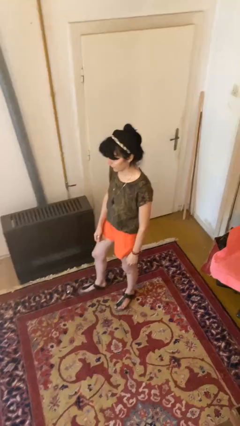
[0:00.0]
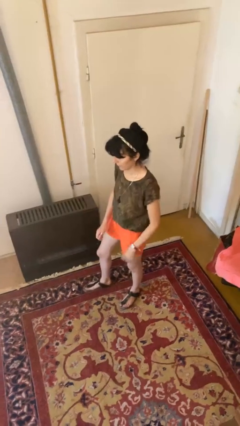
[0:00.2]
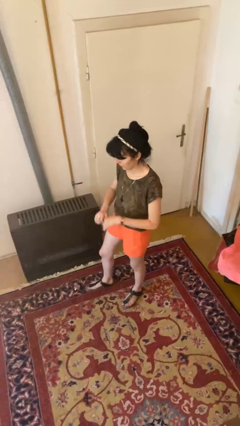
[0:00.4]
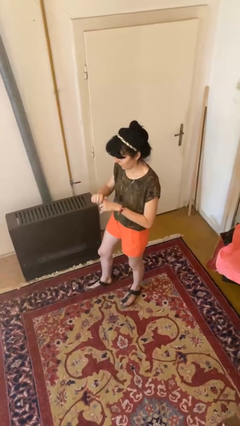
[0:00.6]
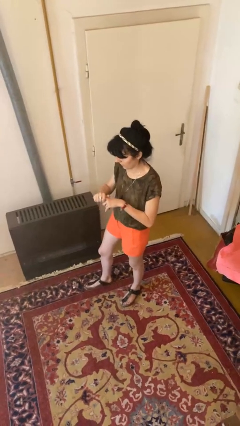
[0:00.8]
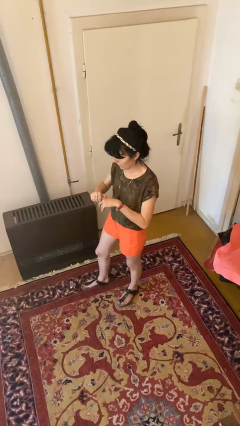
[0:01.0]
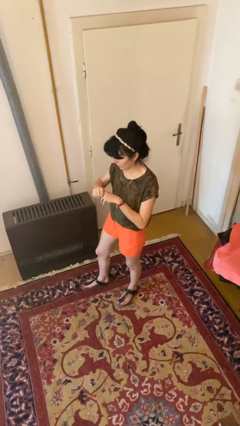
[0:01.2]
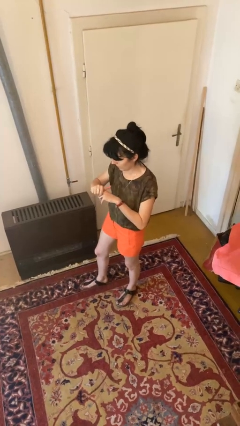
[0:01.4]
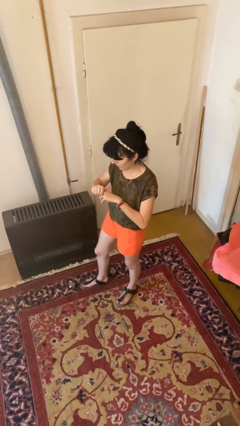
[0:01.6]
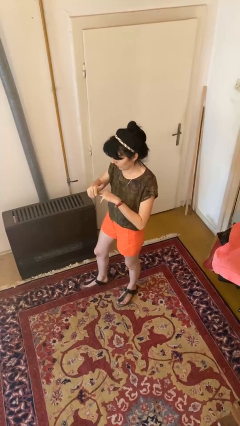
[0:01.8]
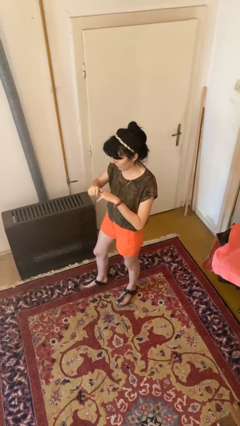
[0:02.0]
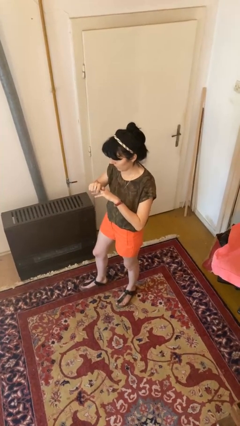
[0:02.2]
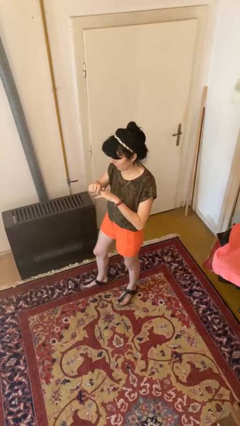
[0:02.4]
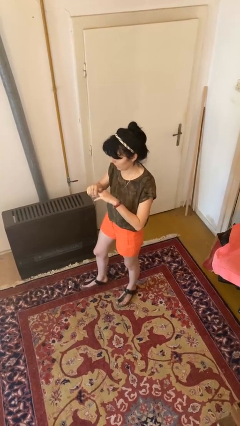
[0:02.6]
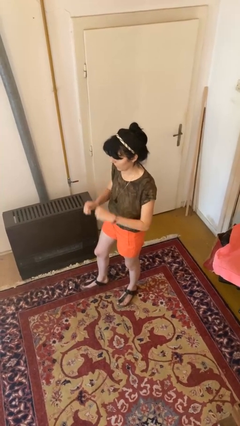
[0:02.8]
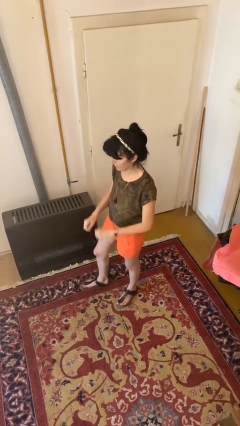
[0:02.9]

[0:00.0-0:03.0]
person cracks knuckles

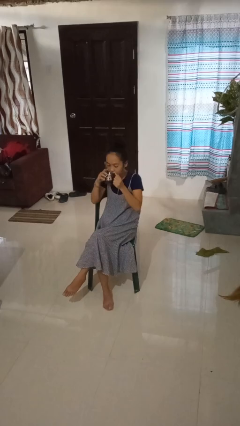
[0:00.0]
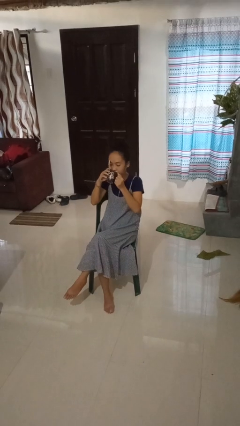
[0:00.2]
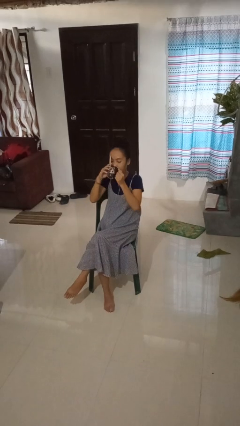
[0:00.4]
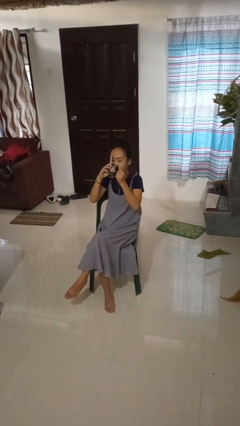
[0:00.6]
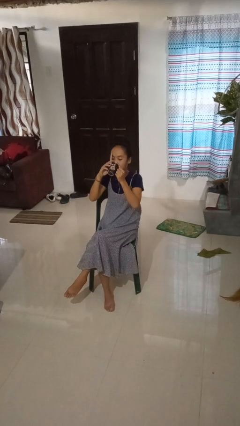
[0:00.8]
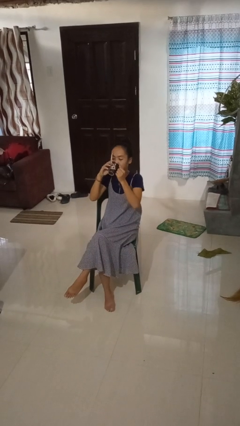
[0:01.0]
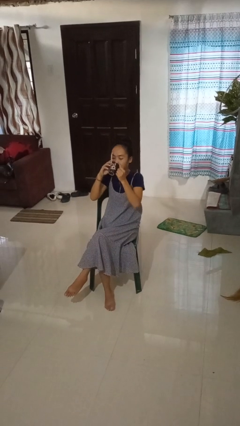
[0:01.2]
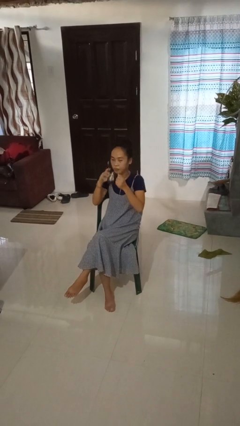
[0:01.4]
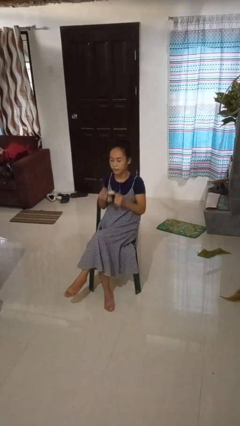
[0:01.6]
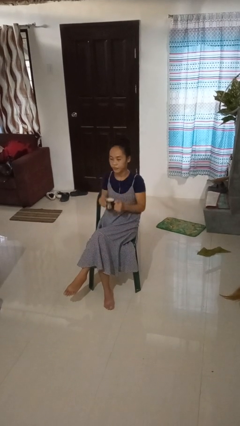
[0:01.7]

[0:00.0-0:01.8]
person drinks from mug

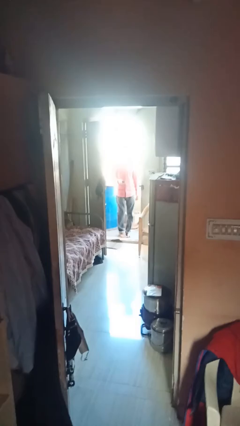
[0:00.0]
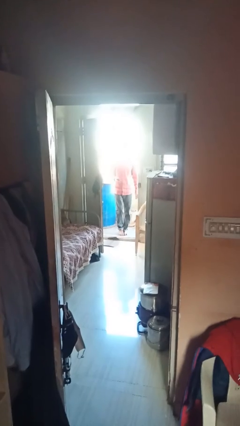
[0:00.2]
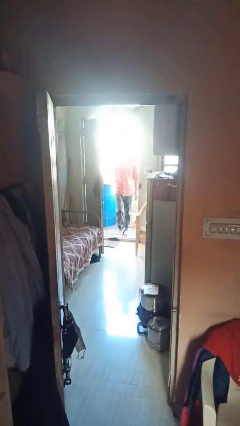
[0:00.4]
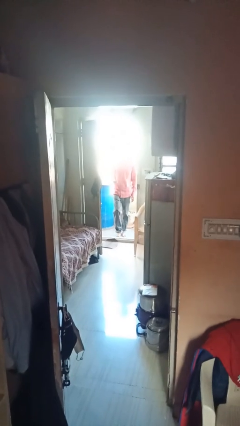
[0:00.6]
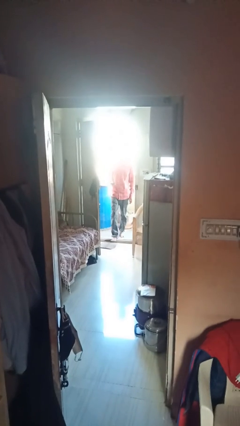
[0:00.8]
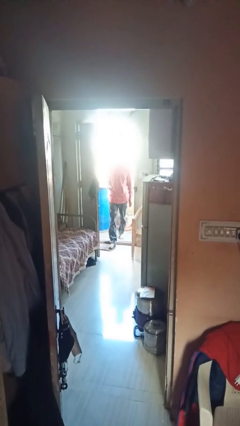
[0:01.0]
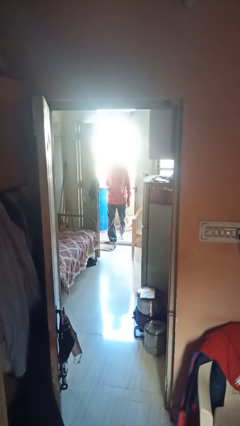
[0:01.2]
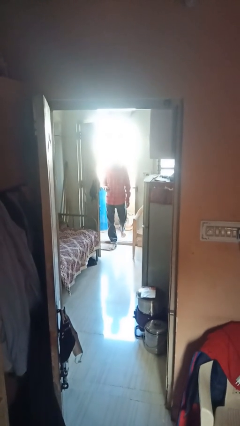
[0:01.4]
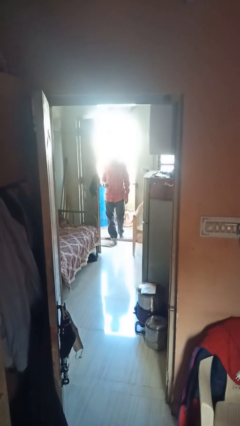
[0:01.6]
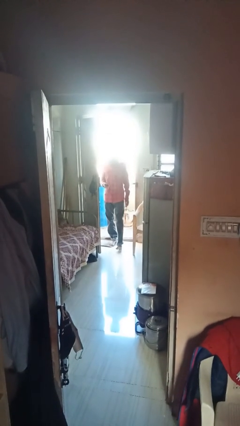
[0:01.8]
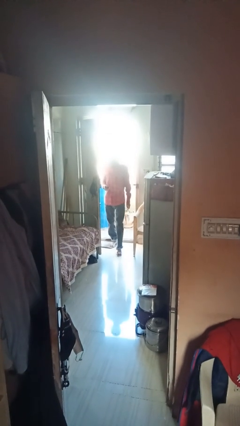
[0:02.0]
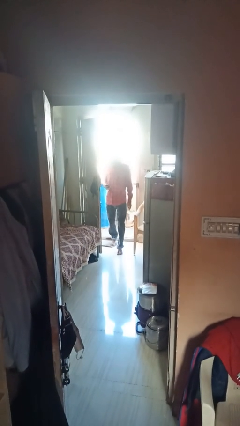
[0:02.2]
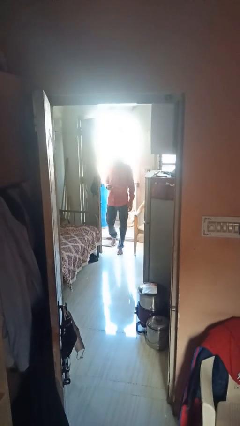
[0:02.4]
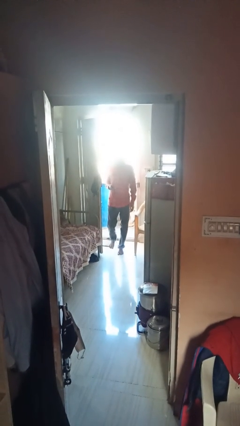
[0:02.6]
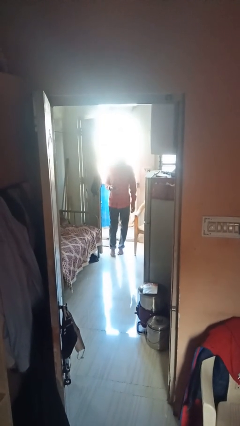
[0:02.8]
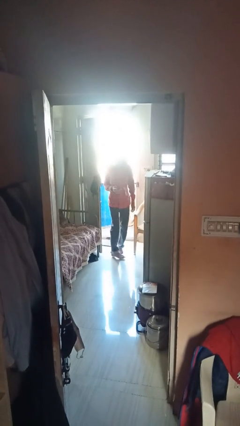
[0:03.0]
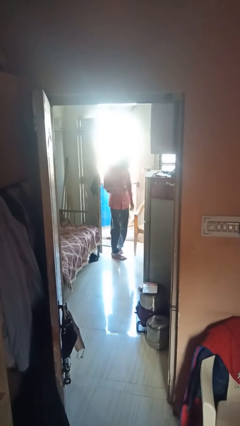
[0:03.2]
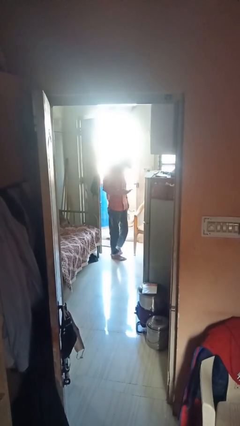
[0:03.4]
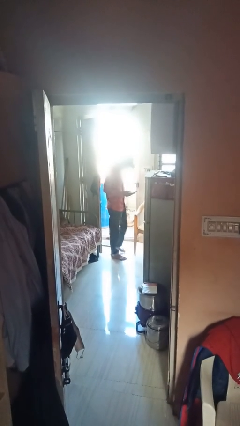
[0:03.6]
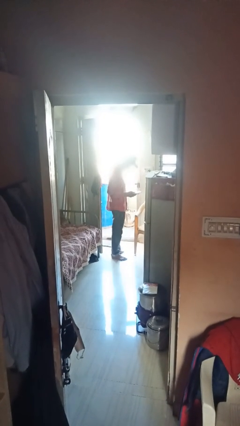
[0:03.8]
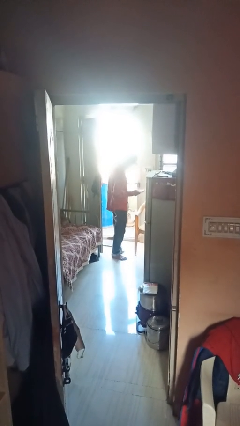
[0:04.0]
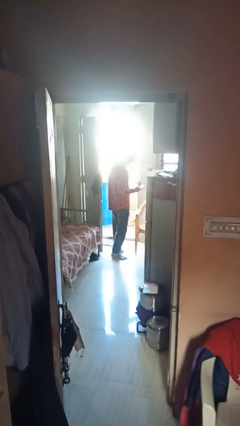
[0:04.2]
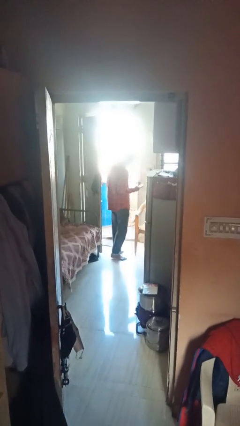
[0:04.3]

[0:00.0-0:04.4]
person enters scene through structure

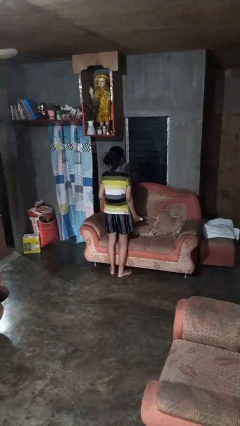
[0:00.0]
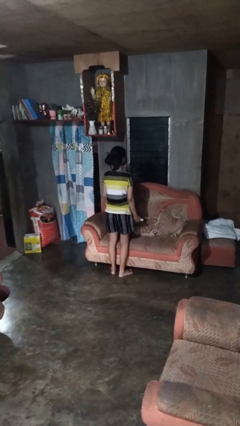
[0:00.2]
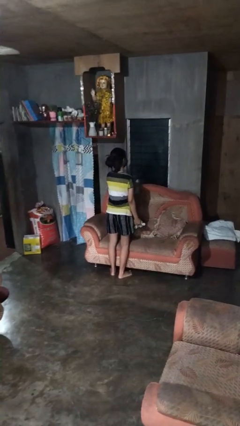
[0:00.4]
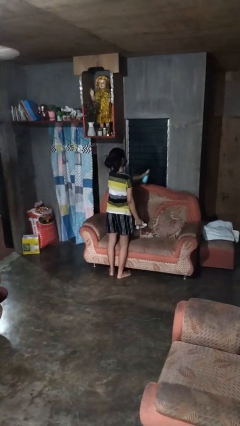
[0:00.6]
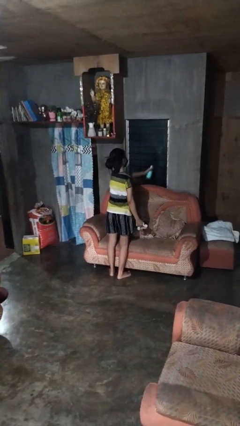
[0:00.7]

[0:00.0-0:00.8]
person sprays from bottle

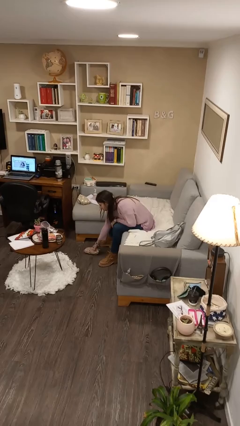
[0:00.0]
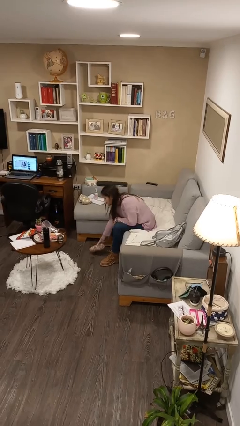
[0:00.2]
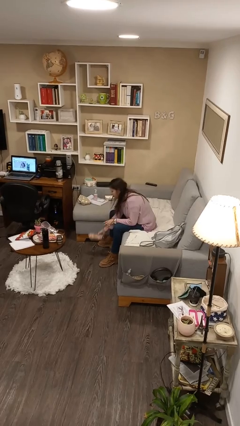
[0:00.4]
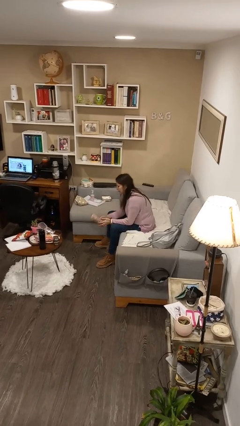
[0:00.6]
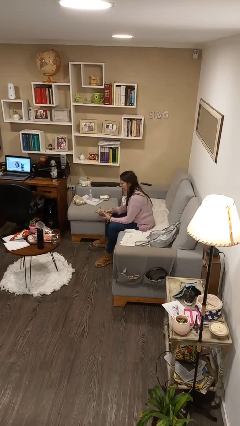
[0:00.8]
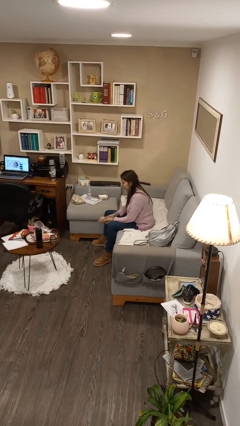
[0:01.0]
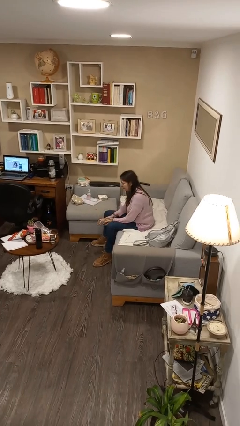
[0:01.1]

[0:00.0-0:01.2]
person picks up object from floor

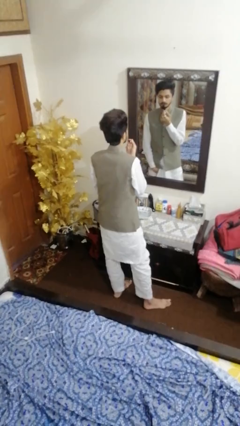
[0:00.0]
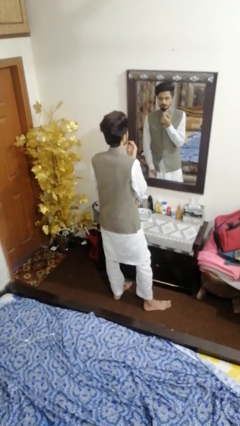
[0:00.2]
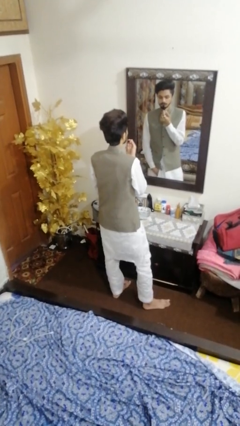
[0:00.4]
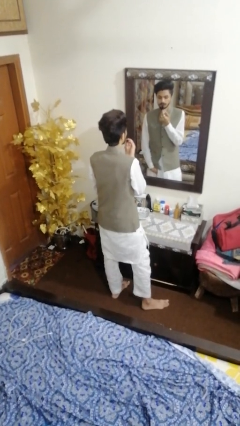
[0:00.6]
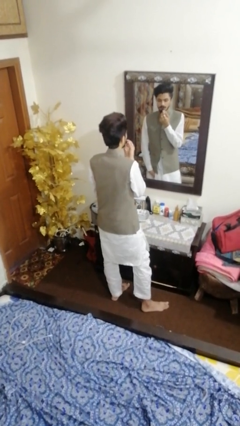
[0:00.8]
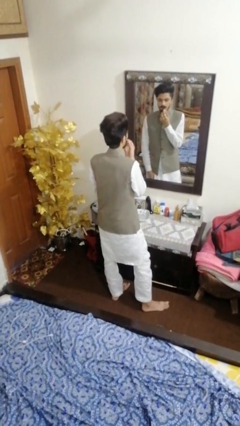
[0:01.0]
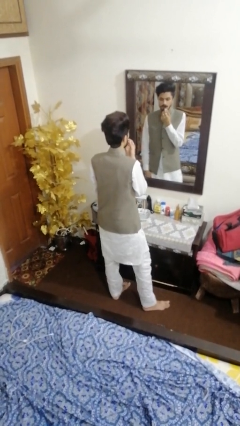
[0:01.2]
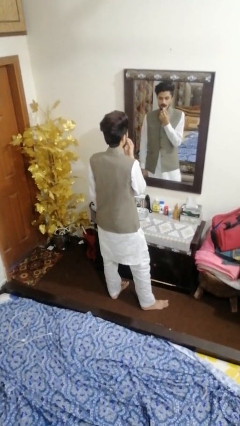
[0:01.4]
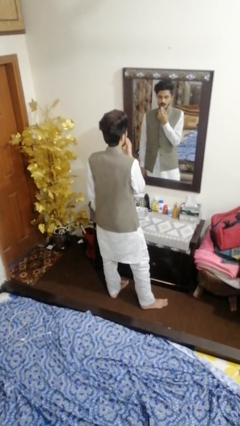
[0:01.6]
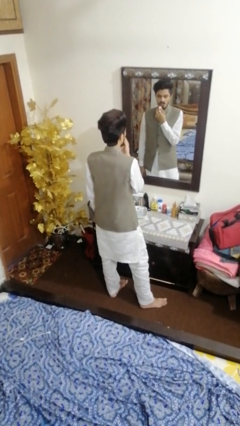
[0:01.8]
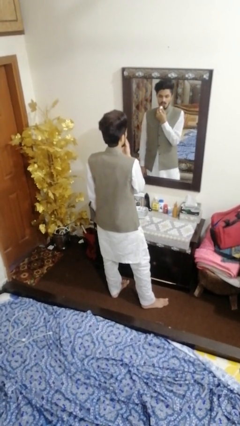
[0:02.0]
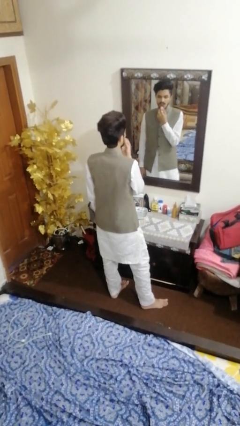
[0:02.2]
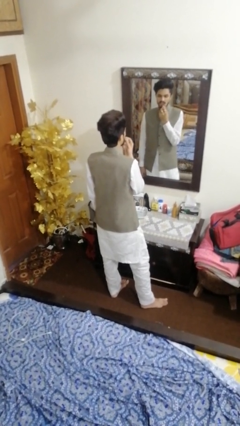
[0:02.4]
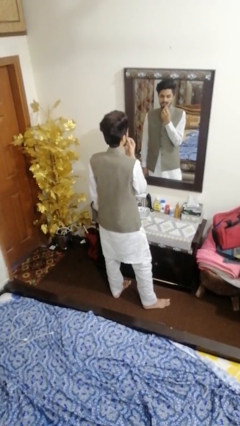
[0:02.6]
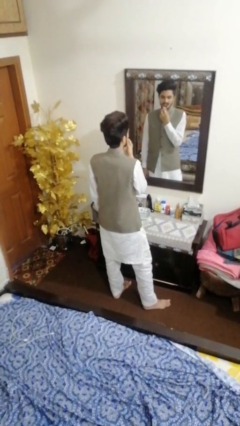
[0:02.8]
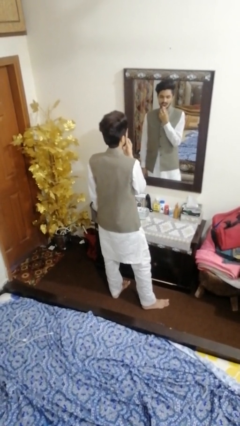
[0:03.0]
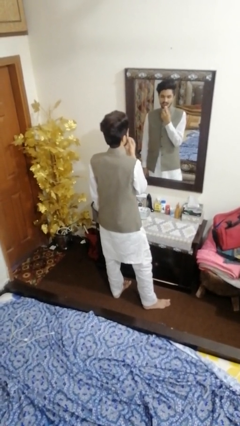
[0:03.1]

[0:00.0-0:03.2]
person applies lip makeup

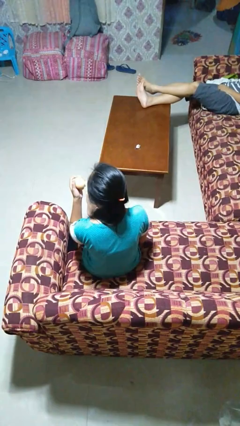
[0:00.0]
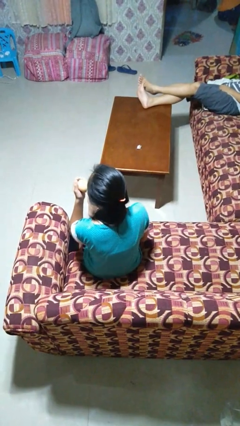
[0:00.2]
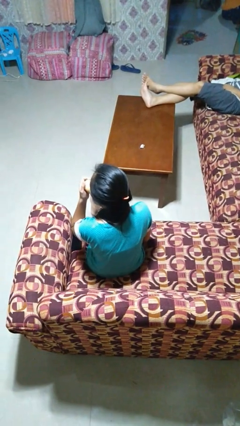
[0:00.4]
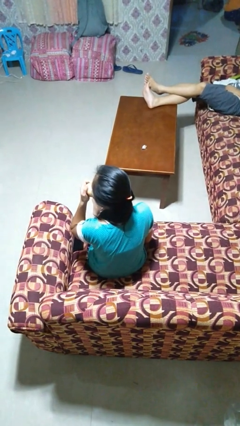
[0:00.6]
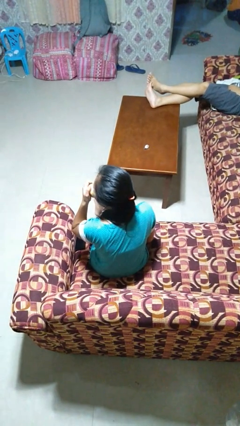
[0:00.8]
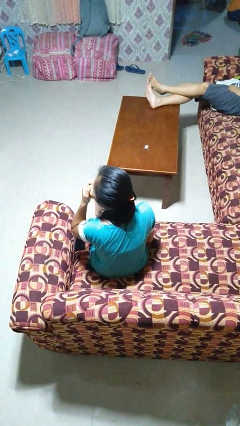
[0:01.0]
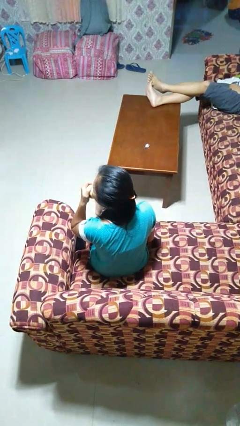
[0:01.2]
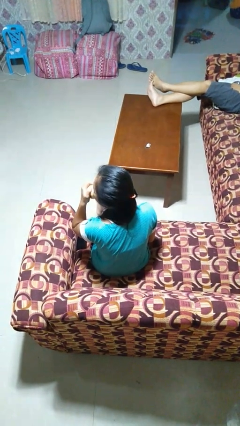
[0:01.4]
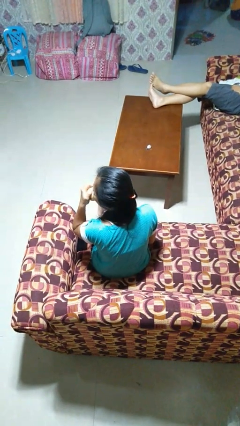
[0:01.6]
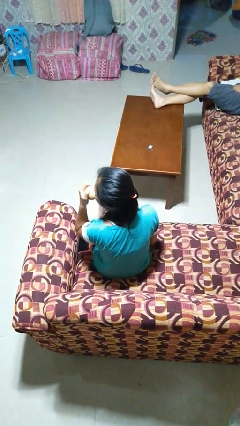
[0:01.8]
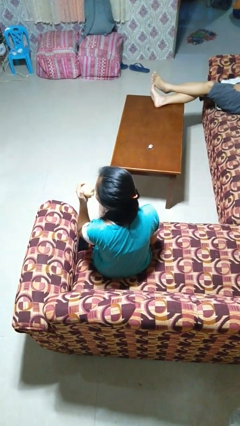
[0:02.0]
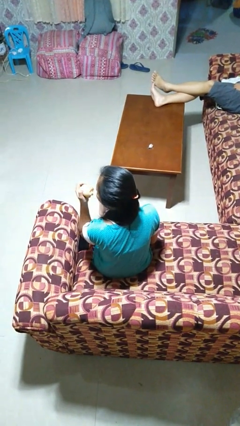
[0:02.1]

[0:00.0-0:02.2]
person eats apple

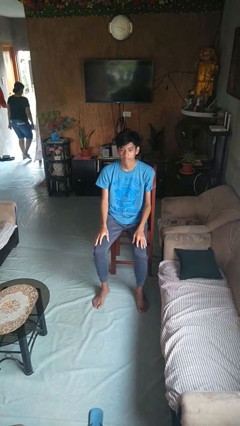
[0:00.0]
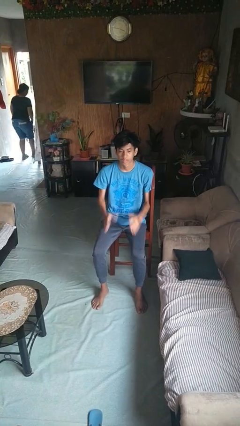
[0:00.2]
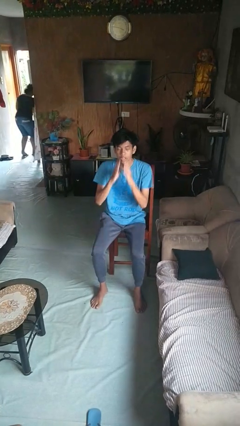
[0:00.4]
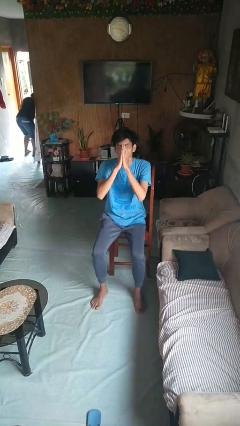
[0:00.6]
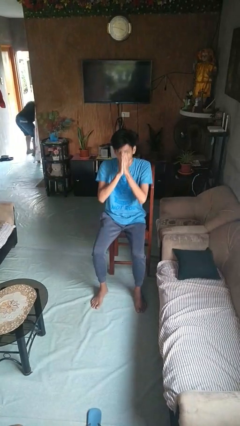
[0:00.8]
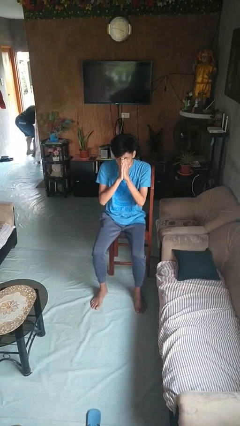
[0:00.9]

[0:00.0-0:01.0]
person sneezes into hand
